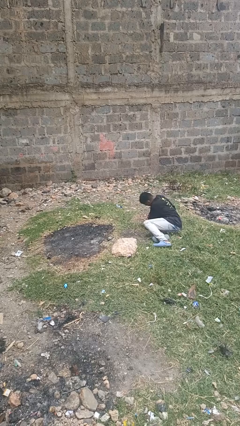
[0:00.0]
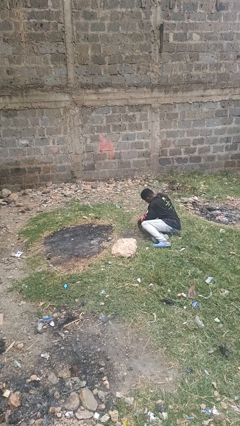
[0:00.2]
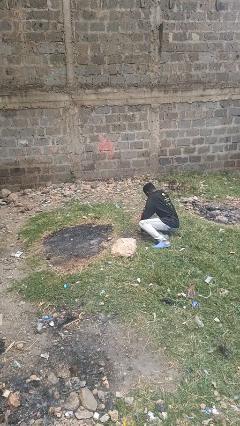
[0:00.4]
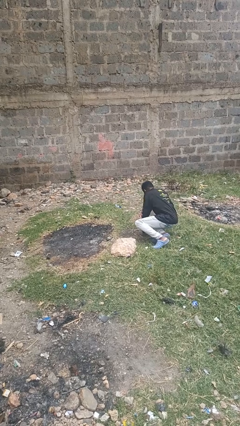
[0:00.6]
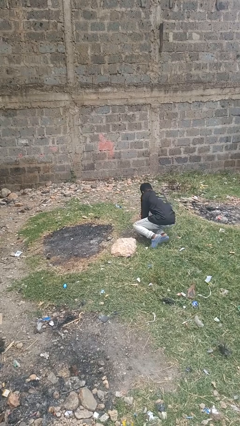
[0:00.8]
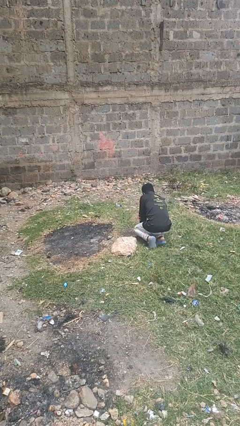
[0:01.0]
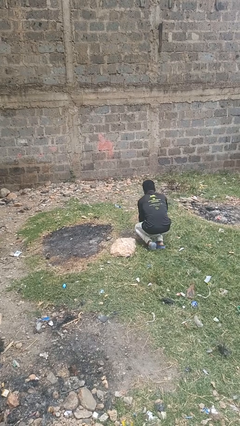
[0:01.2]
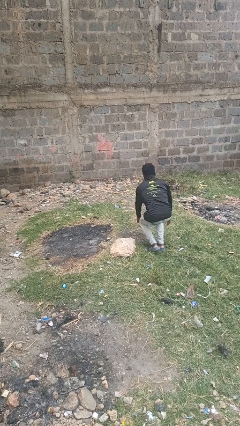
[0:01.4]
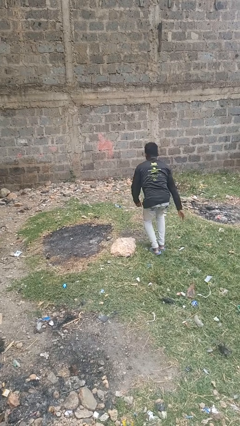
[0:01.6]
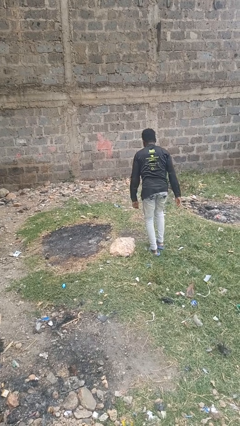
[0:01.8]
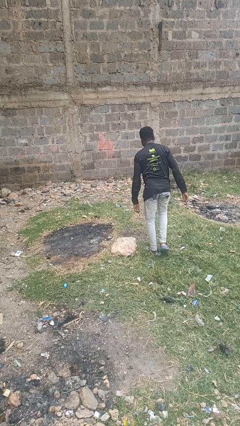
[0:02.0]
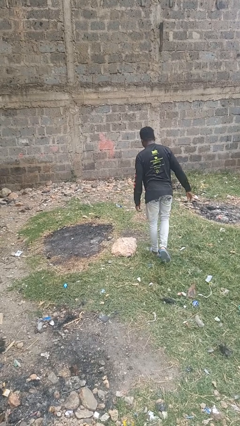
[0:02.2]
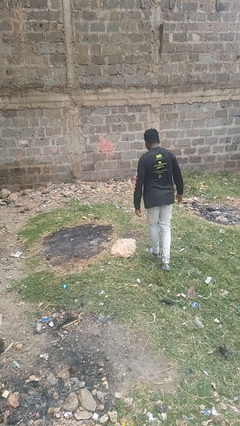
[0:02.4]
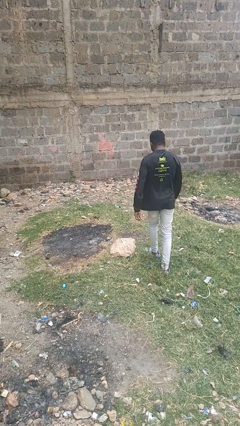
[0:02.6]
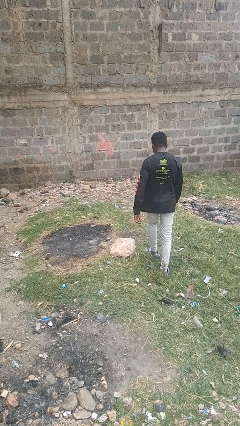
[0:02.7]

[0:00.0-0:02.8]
person stands up from floor

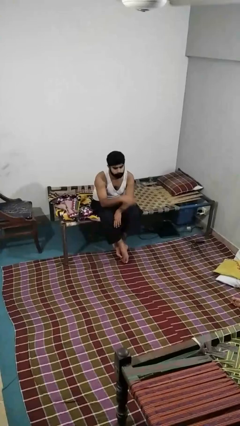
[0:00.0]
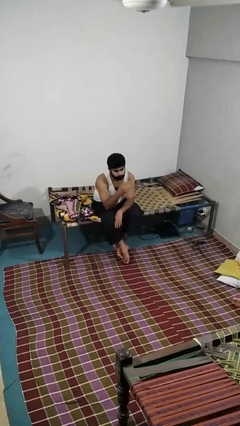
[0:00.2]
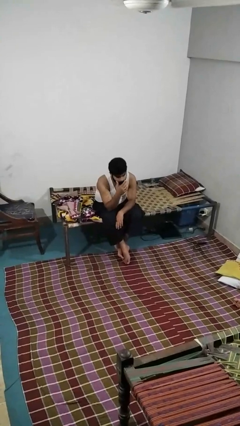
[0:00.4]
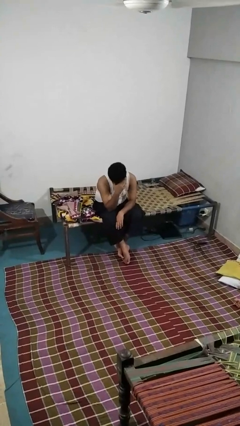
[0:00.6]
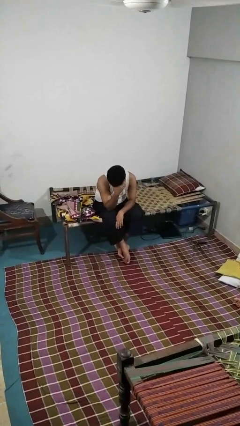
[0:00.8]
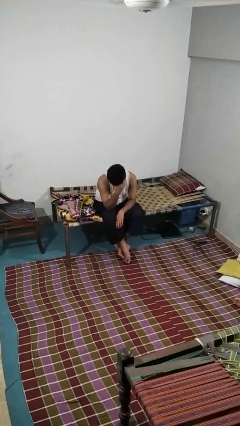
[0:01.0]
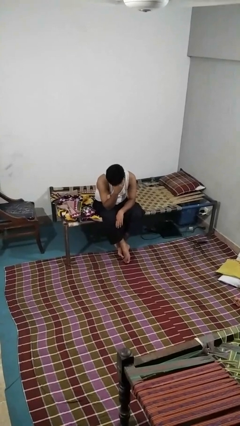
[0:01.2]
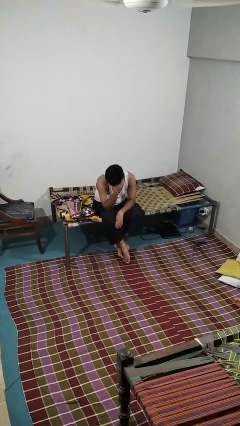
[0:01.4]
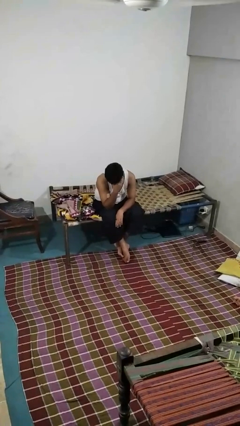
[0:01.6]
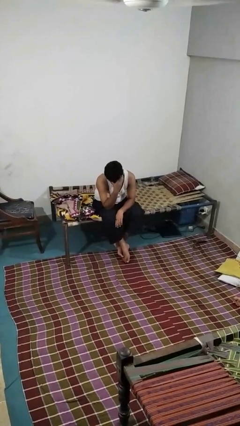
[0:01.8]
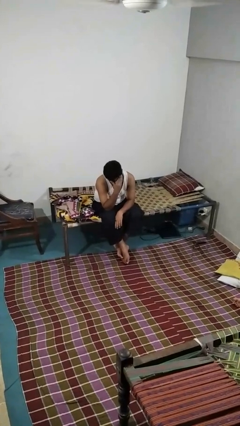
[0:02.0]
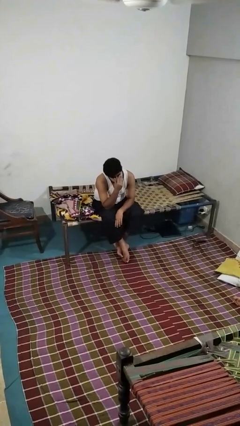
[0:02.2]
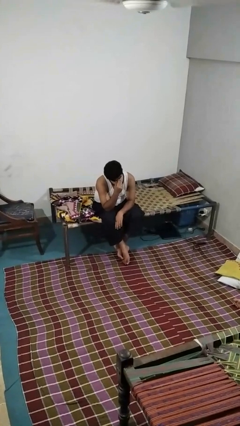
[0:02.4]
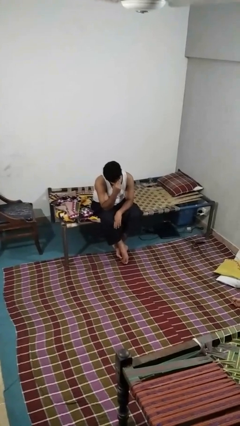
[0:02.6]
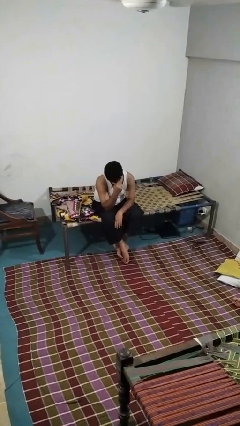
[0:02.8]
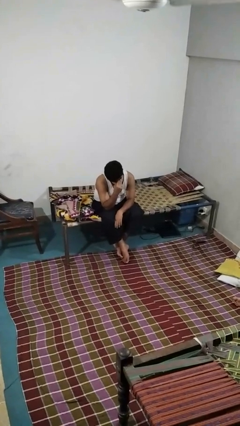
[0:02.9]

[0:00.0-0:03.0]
person covers face with hands

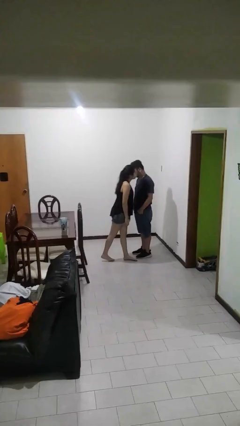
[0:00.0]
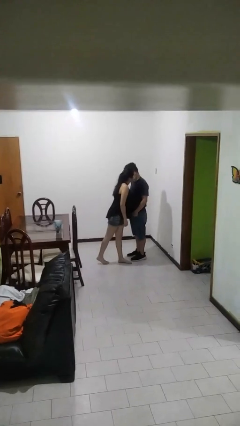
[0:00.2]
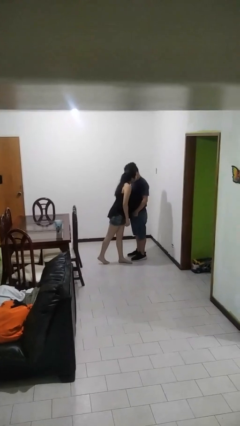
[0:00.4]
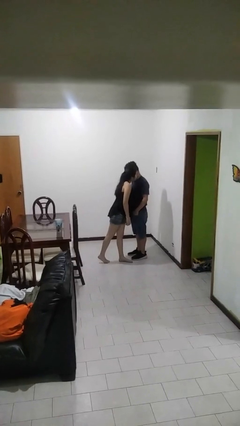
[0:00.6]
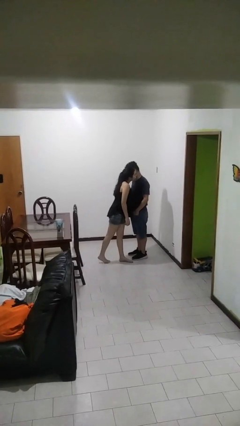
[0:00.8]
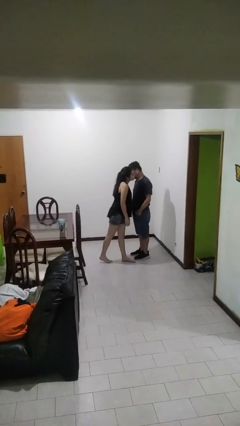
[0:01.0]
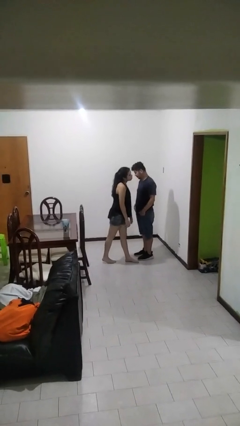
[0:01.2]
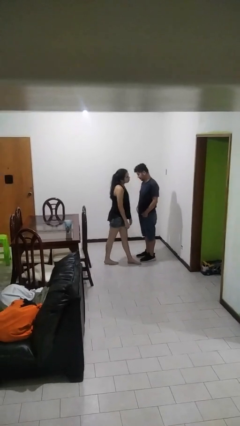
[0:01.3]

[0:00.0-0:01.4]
person kisses cheek of person

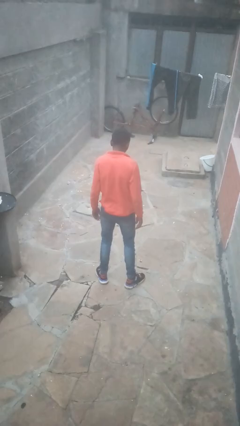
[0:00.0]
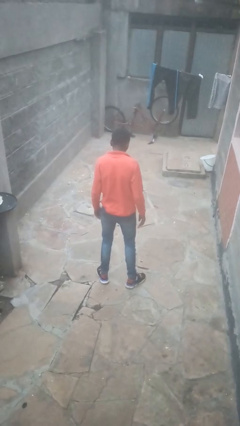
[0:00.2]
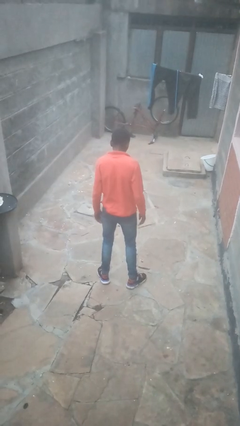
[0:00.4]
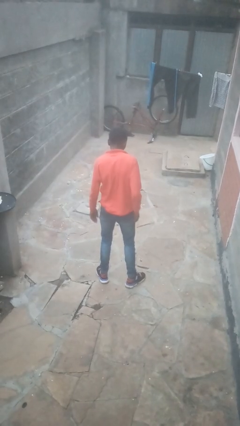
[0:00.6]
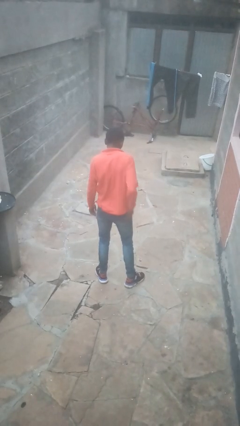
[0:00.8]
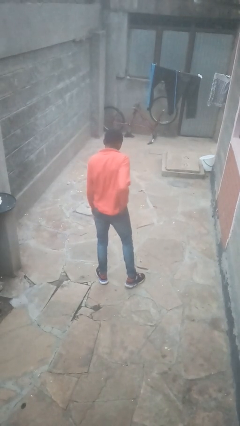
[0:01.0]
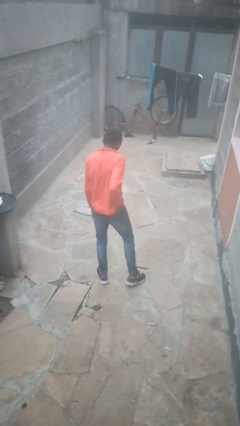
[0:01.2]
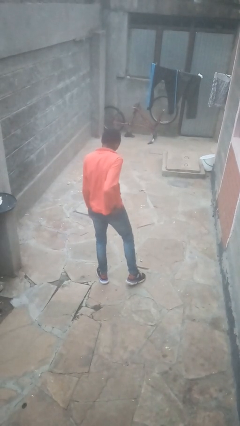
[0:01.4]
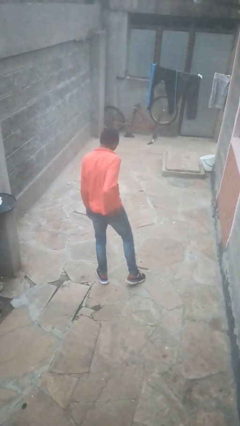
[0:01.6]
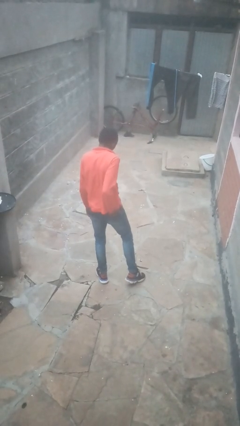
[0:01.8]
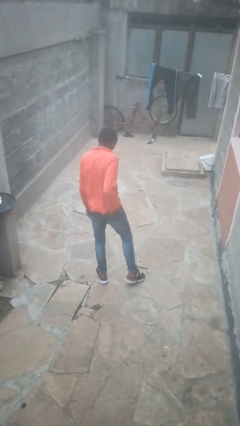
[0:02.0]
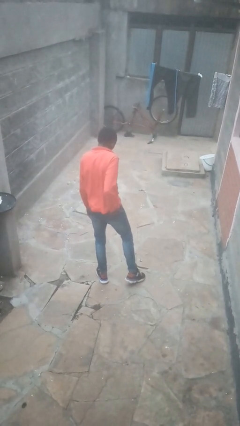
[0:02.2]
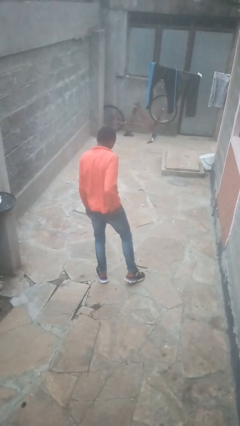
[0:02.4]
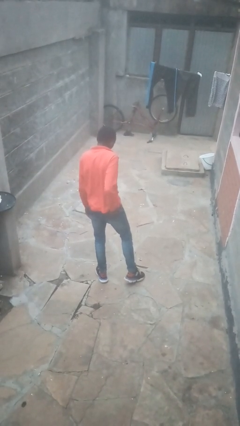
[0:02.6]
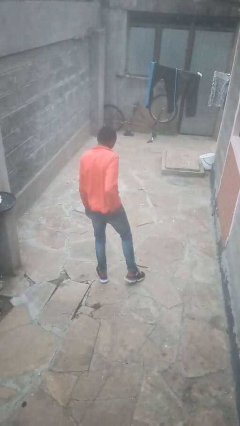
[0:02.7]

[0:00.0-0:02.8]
person puts hands in back pockets

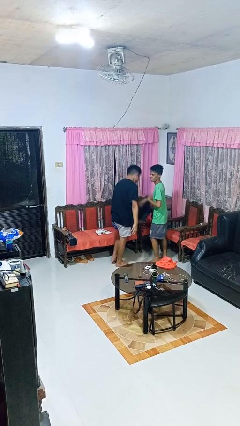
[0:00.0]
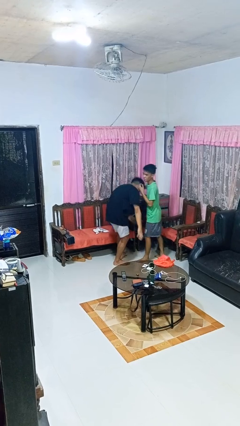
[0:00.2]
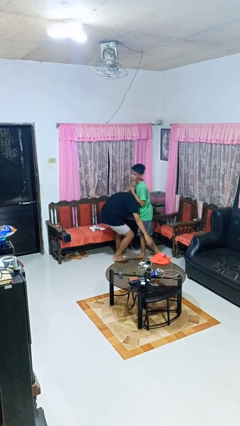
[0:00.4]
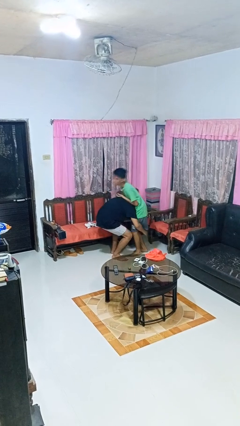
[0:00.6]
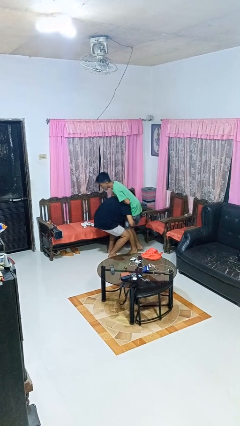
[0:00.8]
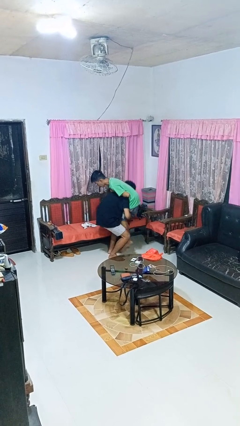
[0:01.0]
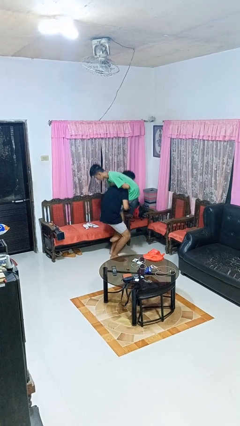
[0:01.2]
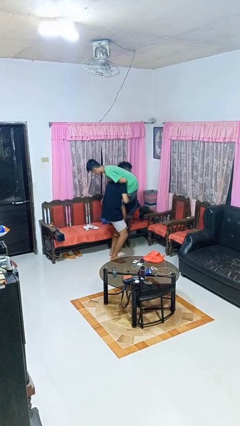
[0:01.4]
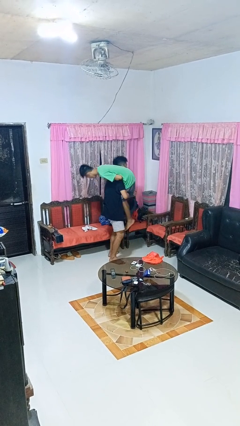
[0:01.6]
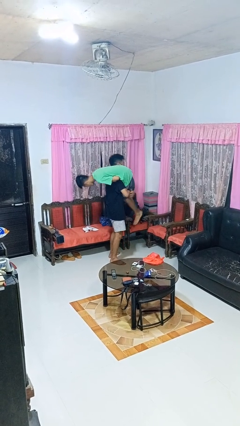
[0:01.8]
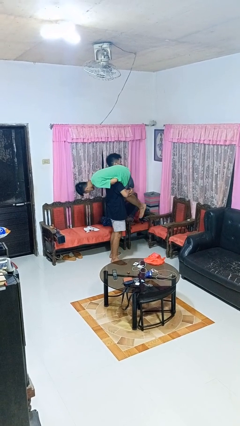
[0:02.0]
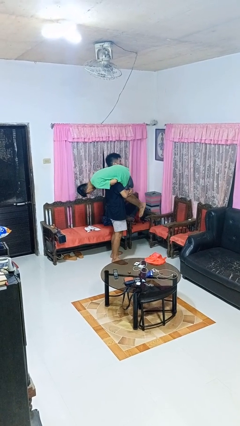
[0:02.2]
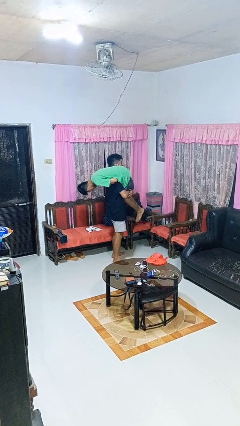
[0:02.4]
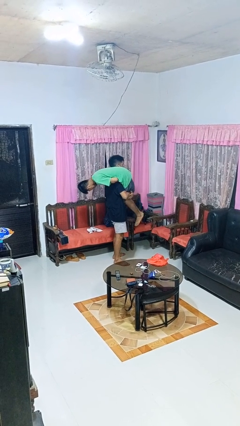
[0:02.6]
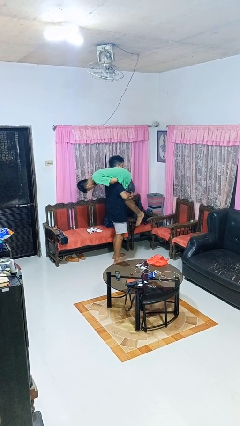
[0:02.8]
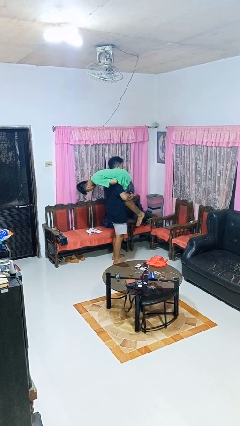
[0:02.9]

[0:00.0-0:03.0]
person carries person over shoulder

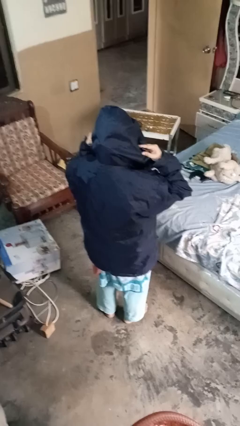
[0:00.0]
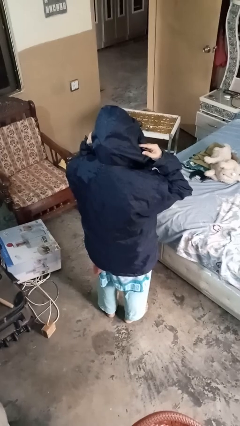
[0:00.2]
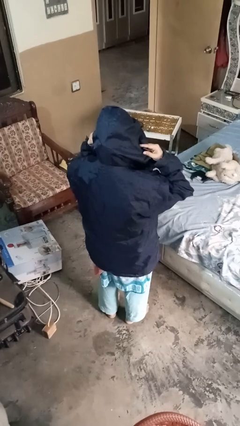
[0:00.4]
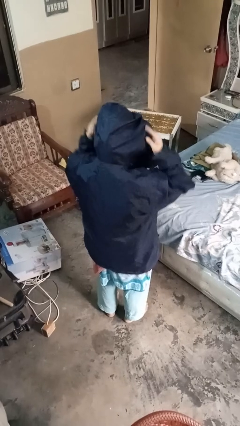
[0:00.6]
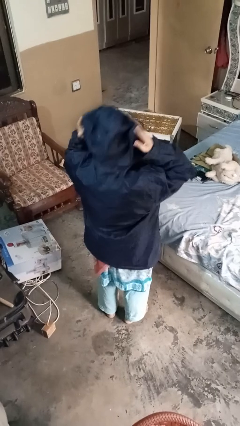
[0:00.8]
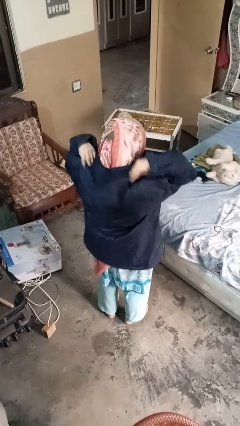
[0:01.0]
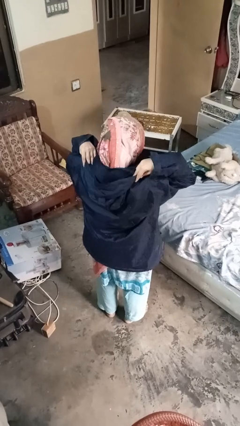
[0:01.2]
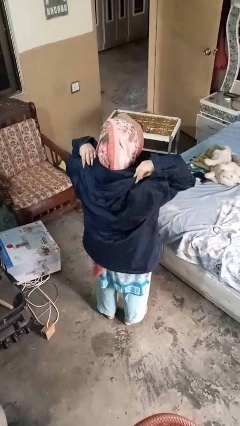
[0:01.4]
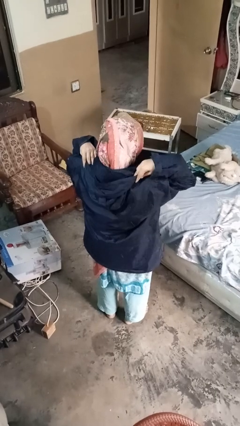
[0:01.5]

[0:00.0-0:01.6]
person takes off hoodie

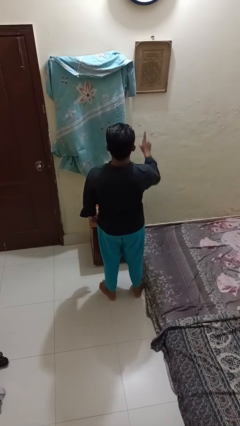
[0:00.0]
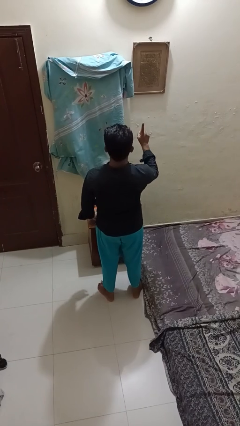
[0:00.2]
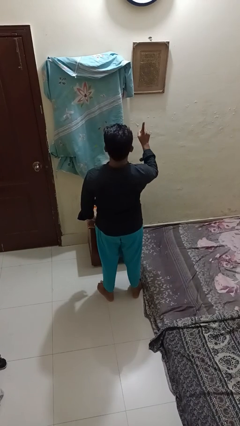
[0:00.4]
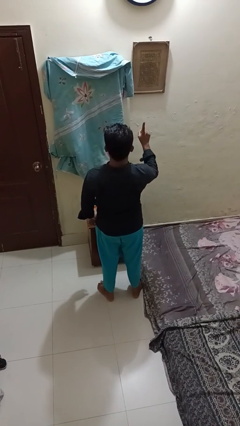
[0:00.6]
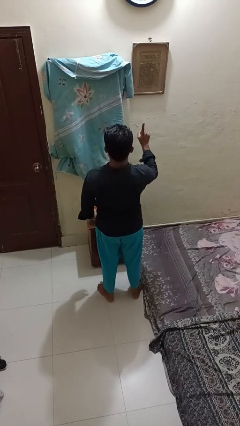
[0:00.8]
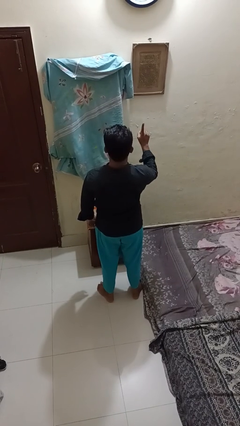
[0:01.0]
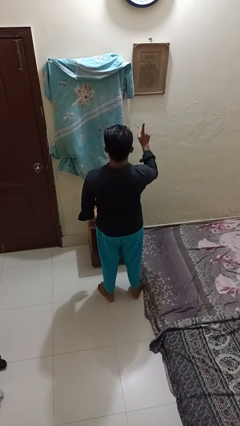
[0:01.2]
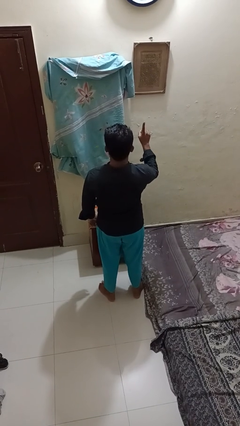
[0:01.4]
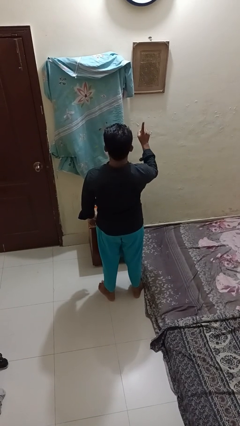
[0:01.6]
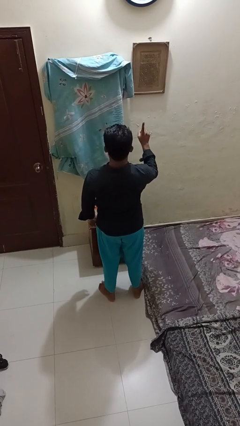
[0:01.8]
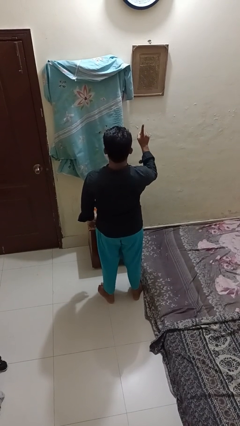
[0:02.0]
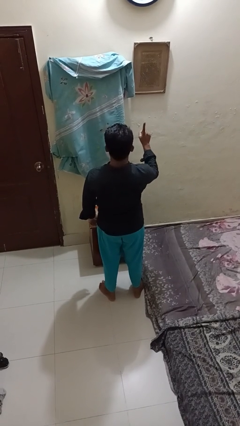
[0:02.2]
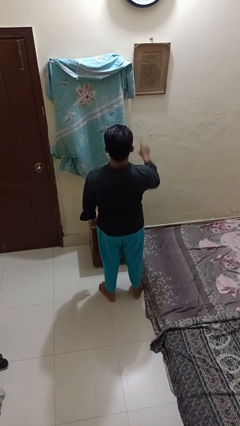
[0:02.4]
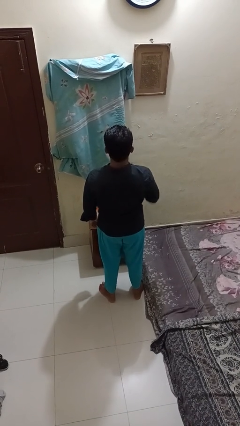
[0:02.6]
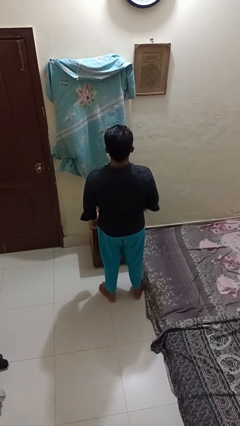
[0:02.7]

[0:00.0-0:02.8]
person gestures number one
